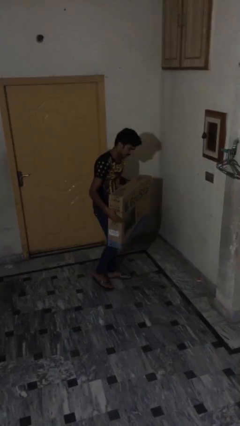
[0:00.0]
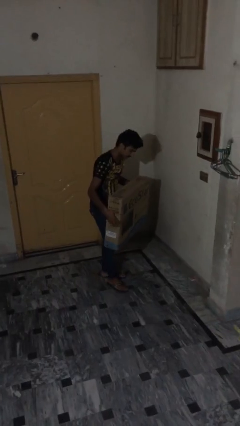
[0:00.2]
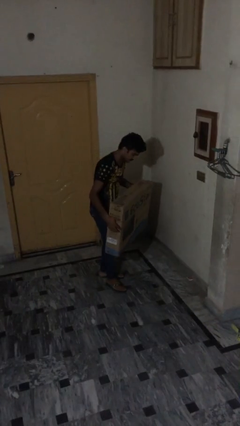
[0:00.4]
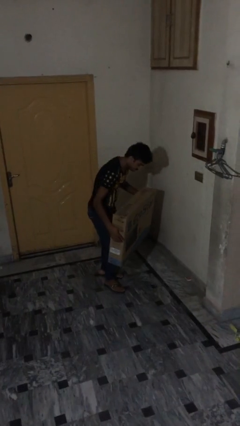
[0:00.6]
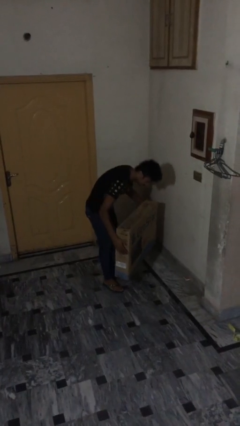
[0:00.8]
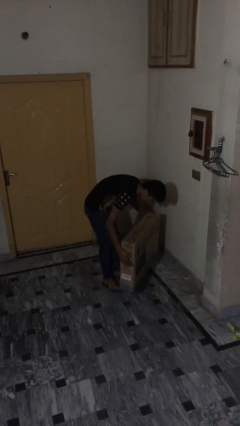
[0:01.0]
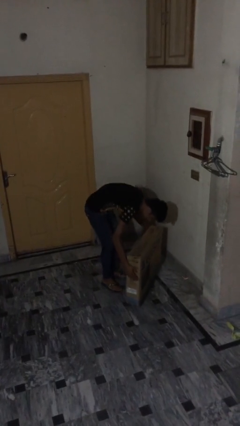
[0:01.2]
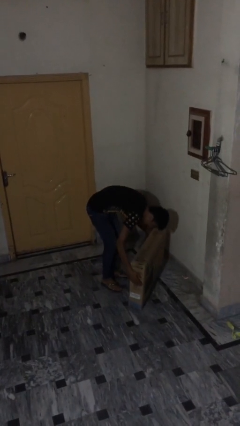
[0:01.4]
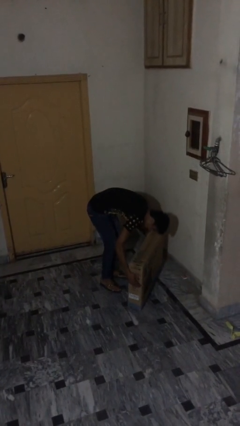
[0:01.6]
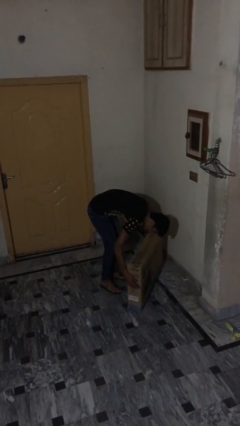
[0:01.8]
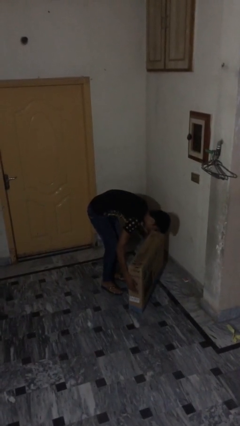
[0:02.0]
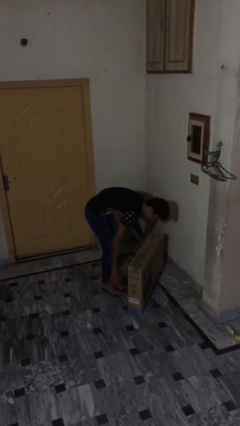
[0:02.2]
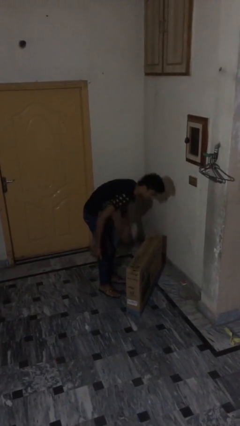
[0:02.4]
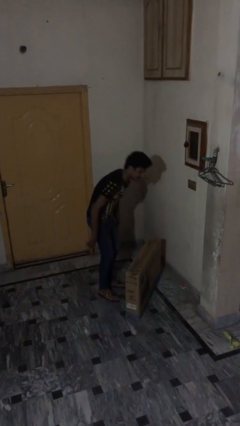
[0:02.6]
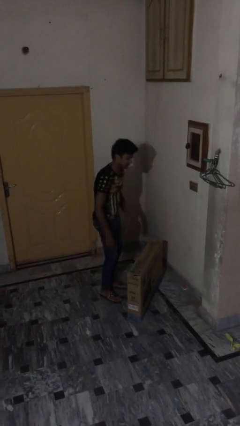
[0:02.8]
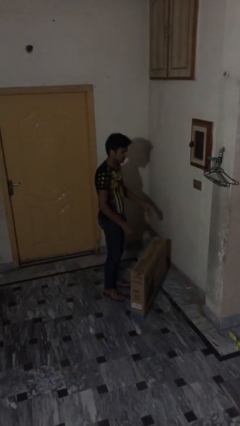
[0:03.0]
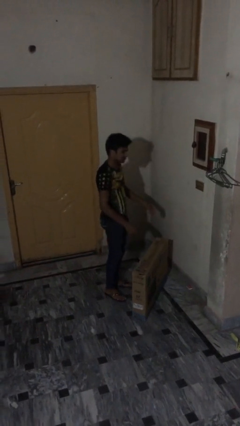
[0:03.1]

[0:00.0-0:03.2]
person puts down object on floor

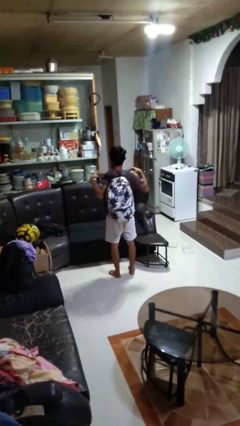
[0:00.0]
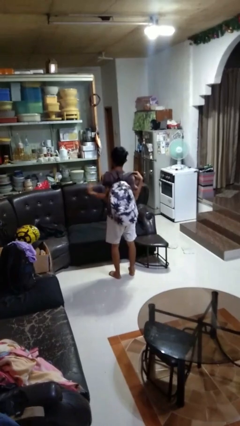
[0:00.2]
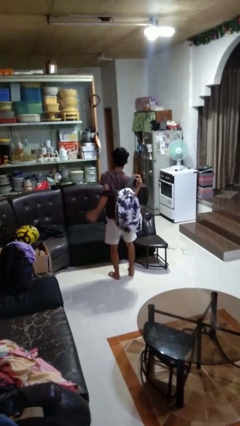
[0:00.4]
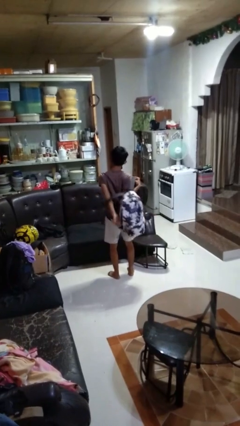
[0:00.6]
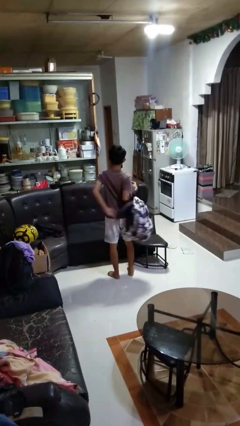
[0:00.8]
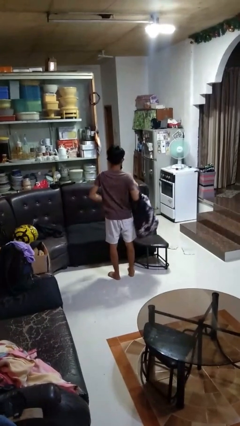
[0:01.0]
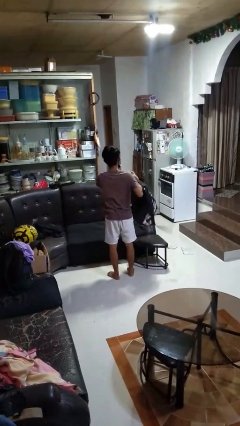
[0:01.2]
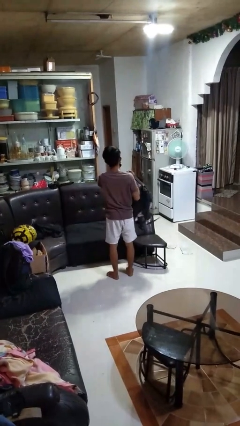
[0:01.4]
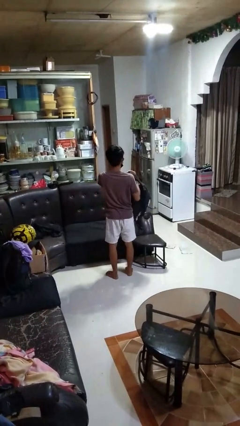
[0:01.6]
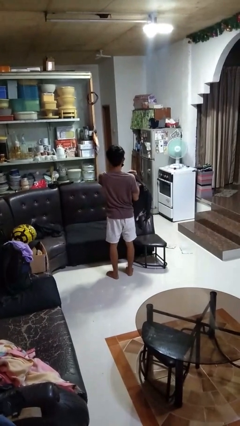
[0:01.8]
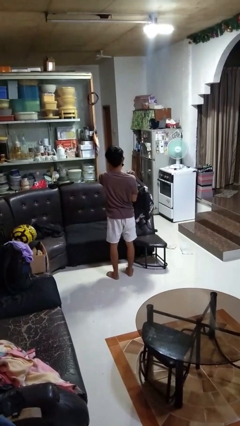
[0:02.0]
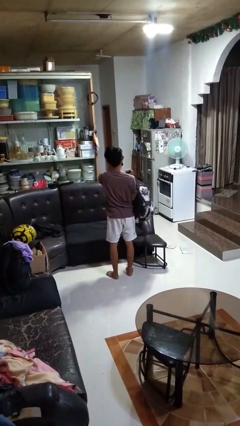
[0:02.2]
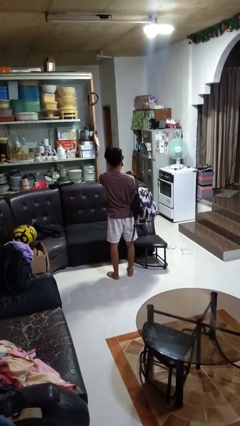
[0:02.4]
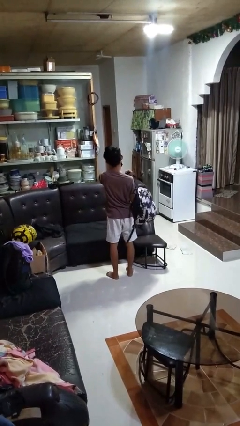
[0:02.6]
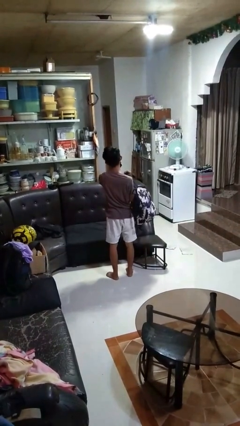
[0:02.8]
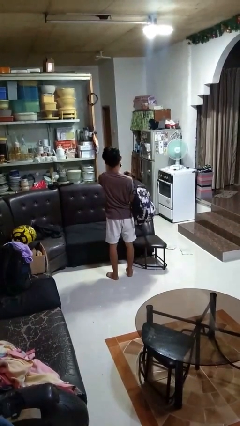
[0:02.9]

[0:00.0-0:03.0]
person takes off backpack

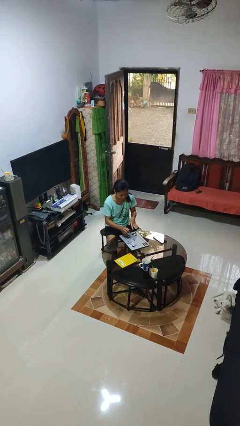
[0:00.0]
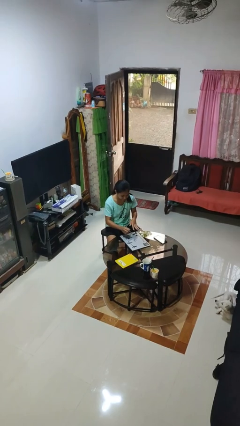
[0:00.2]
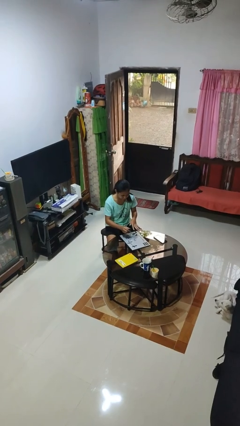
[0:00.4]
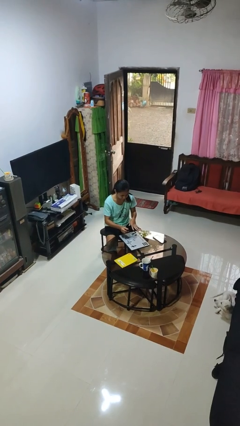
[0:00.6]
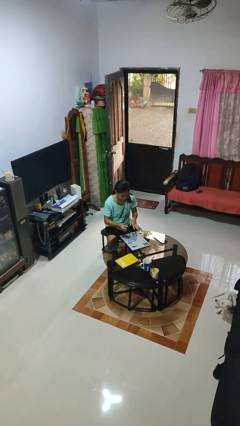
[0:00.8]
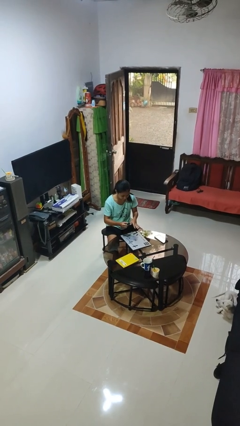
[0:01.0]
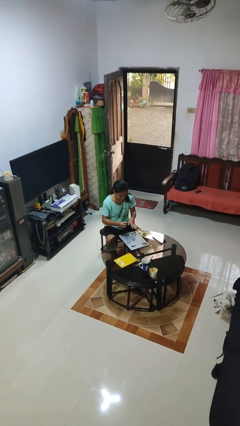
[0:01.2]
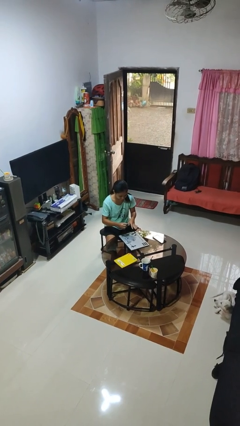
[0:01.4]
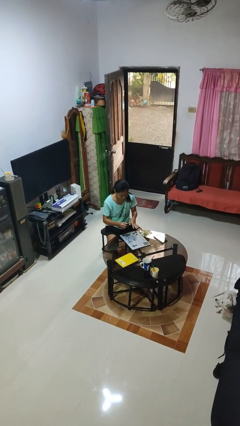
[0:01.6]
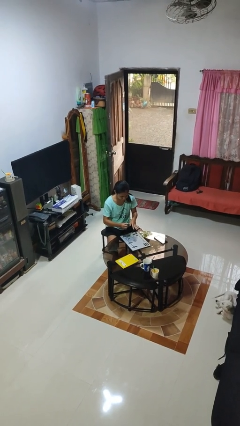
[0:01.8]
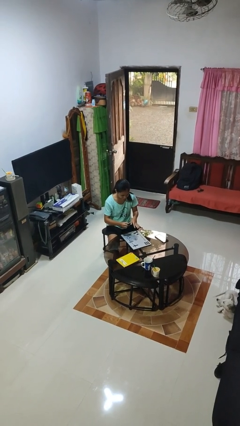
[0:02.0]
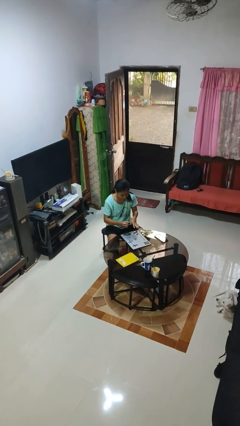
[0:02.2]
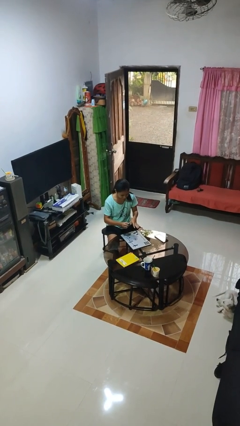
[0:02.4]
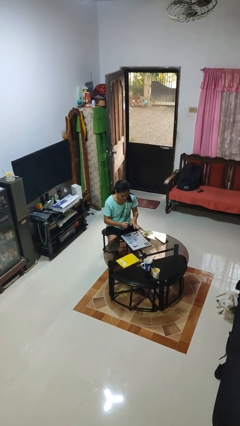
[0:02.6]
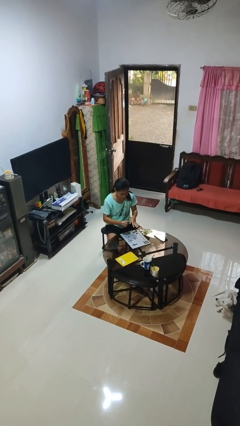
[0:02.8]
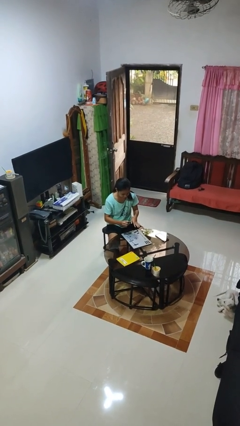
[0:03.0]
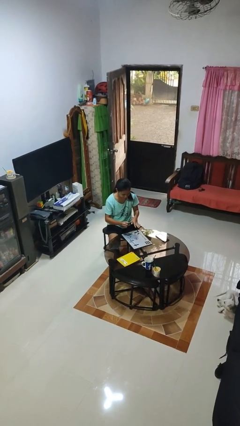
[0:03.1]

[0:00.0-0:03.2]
person paints fingernails

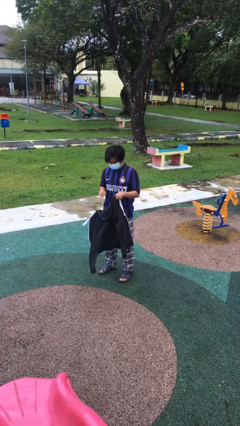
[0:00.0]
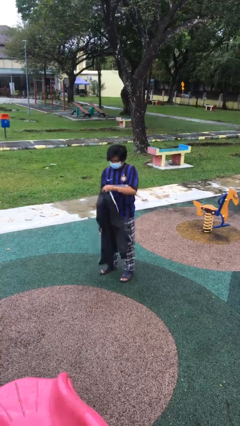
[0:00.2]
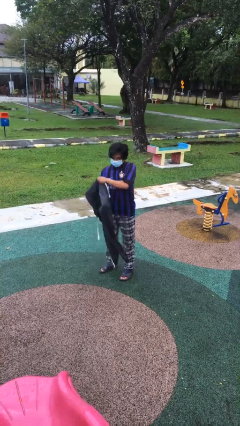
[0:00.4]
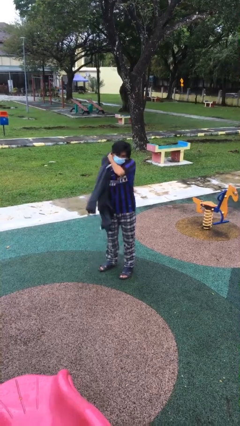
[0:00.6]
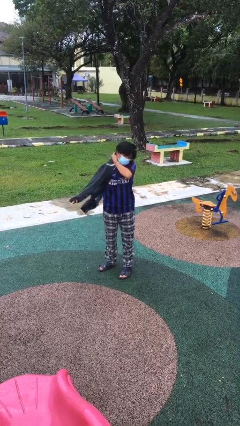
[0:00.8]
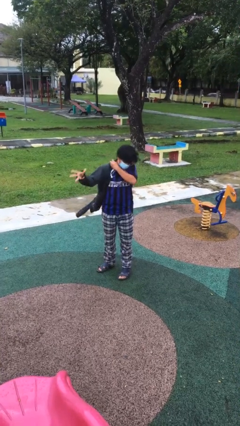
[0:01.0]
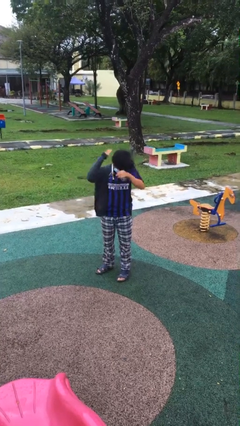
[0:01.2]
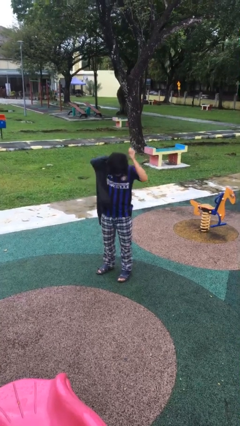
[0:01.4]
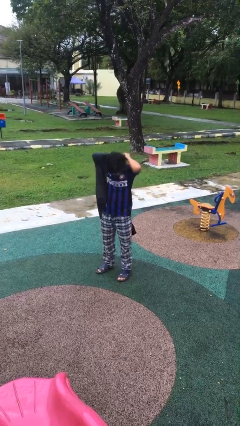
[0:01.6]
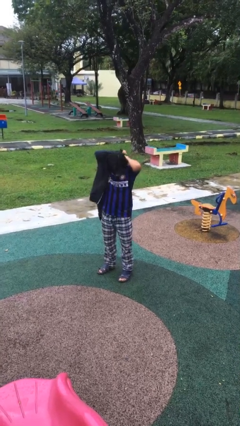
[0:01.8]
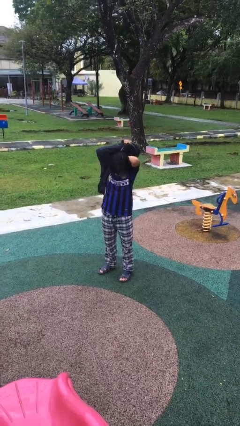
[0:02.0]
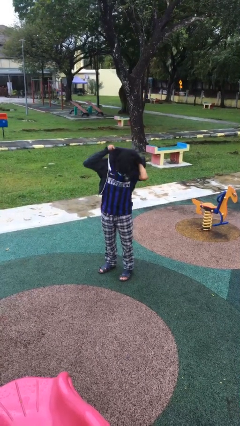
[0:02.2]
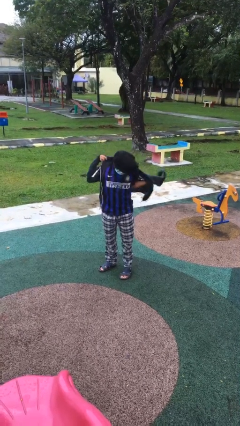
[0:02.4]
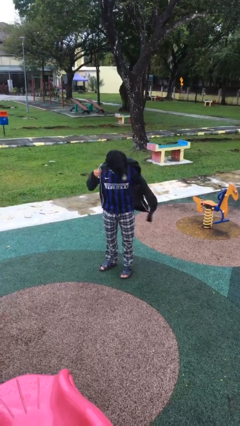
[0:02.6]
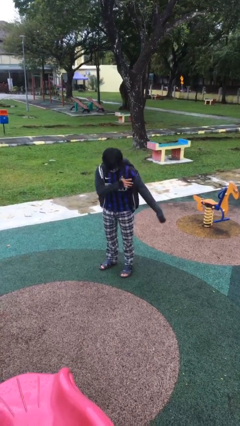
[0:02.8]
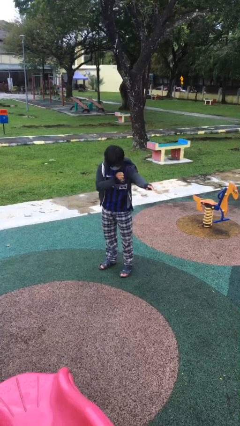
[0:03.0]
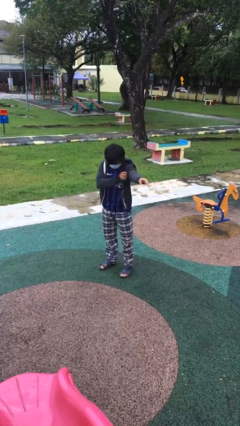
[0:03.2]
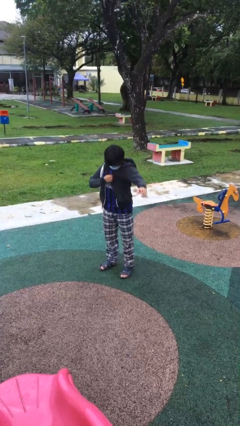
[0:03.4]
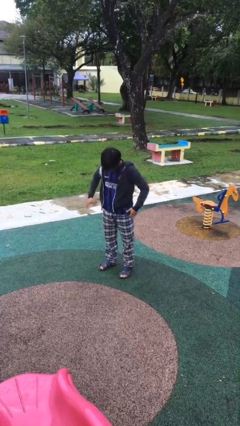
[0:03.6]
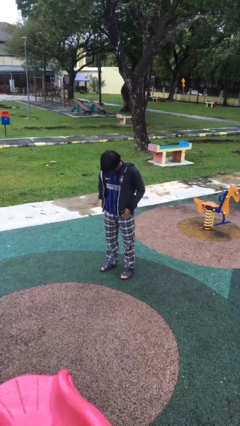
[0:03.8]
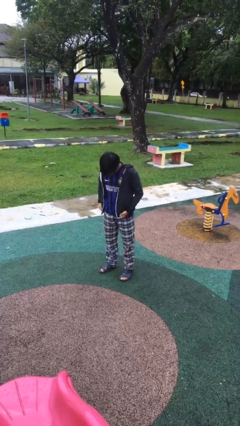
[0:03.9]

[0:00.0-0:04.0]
person puts on jacket

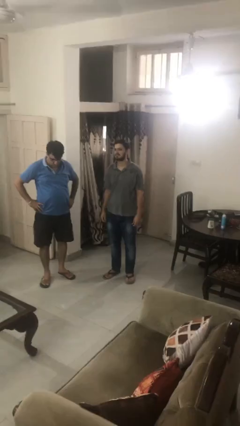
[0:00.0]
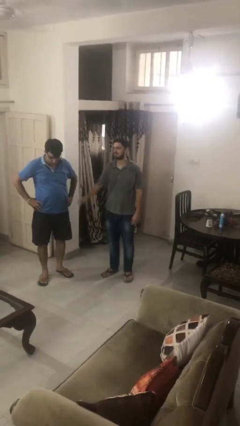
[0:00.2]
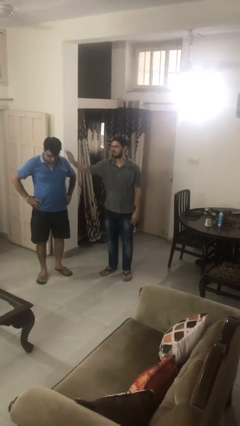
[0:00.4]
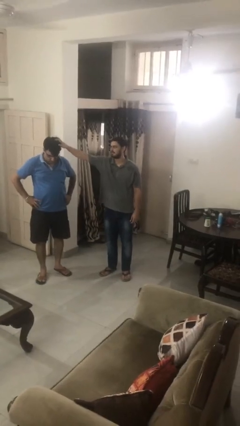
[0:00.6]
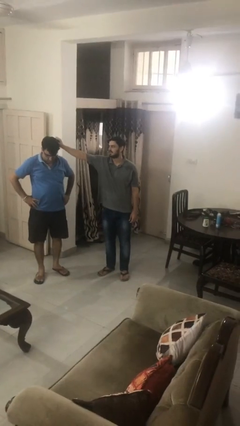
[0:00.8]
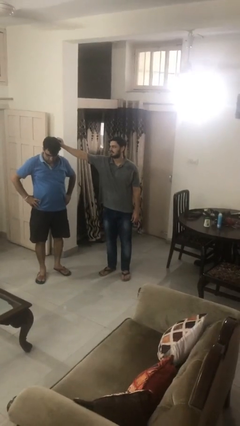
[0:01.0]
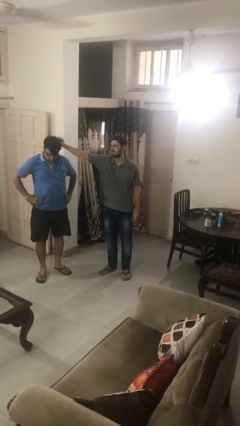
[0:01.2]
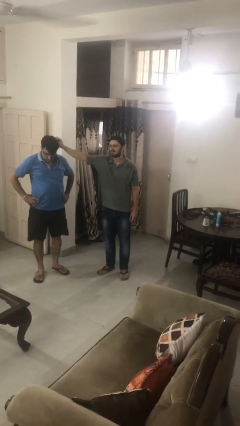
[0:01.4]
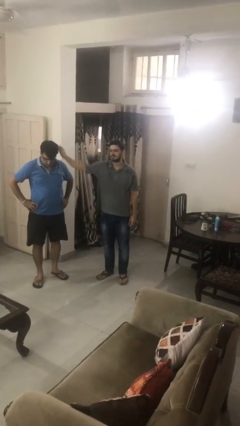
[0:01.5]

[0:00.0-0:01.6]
person grabs person by hair

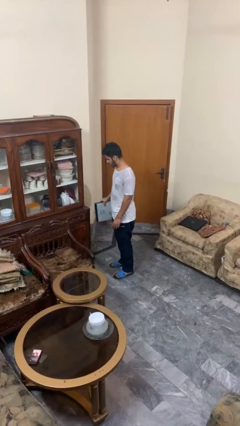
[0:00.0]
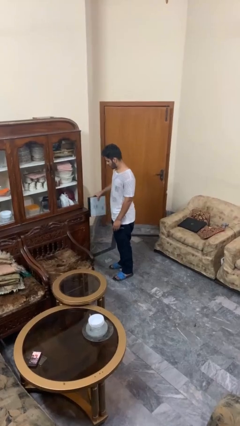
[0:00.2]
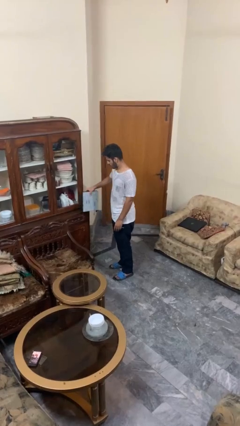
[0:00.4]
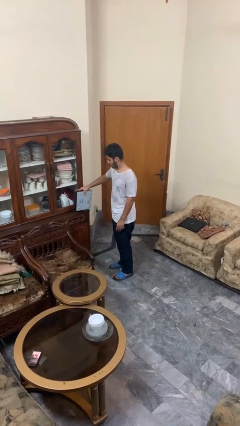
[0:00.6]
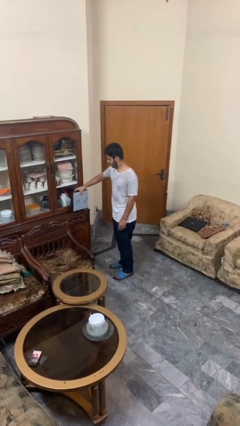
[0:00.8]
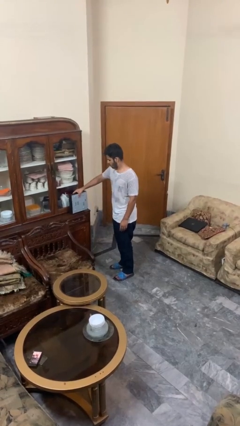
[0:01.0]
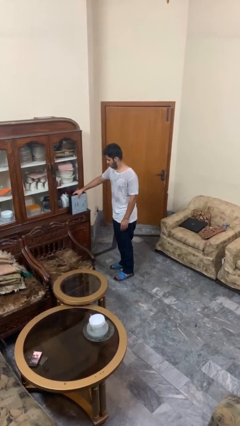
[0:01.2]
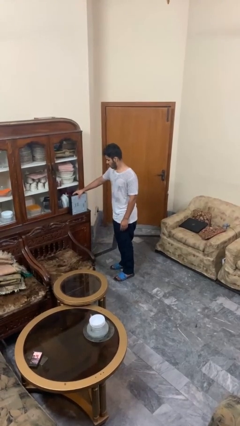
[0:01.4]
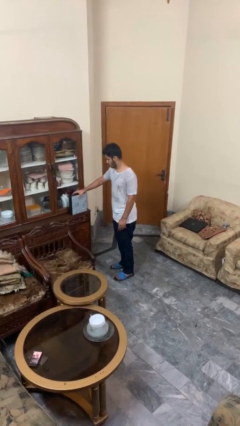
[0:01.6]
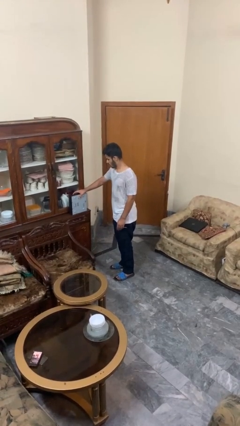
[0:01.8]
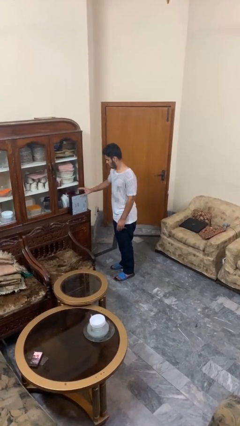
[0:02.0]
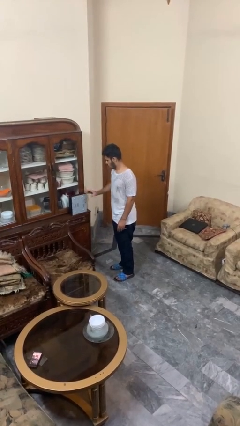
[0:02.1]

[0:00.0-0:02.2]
person puts down object on countertop

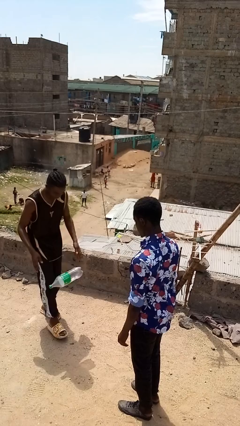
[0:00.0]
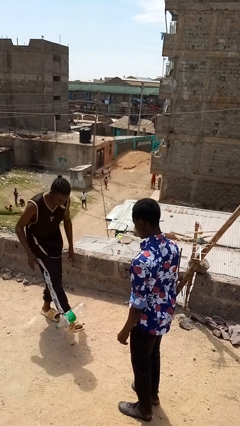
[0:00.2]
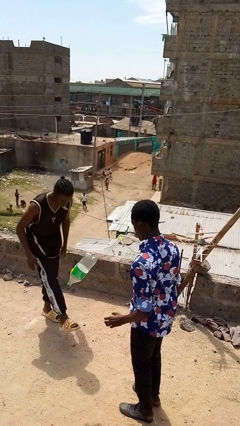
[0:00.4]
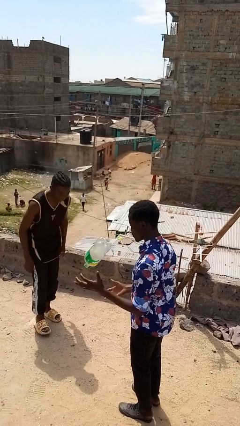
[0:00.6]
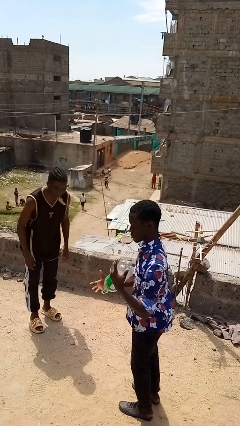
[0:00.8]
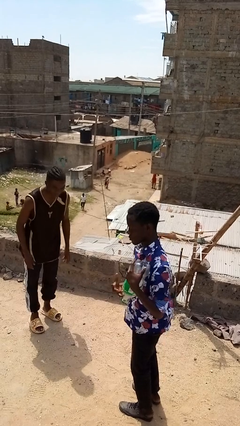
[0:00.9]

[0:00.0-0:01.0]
person kicks object to person
